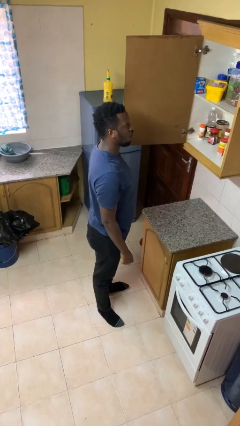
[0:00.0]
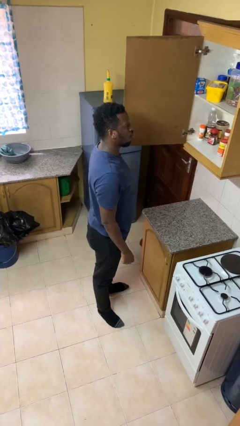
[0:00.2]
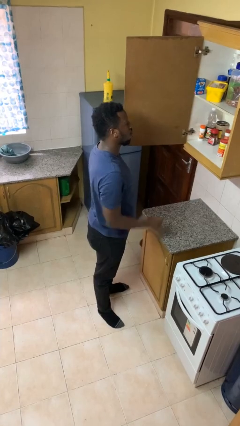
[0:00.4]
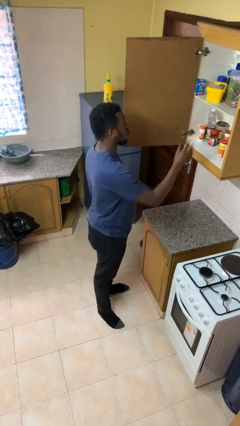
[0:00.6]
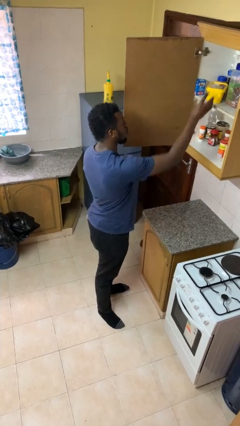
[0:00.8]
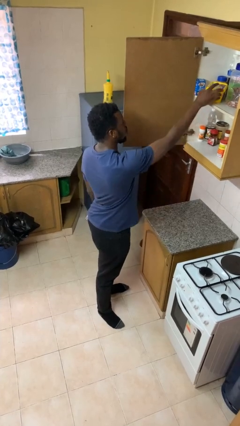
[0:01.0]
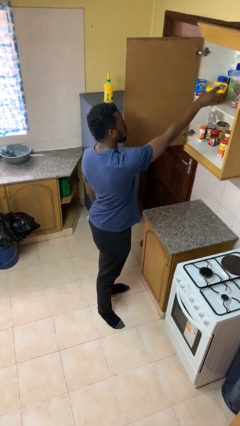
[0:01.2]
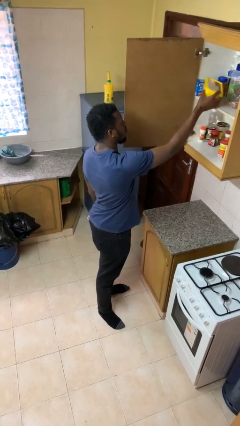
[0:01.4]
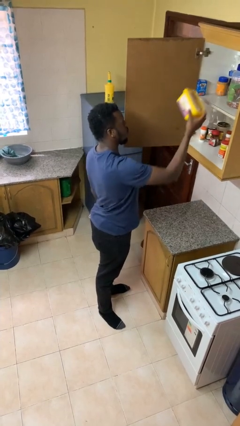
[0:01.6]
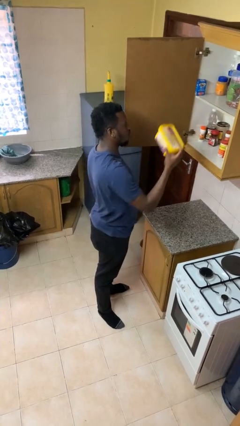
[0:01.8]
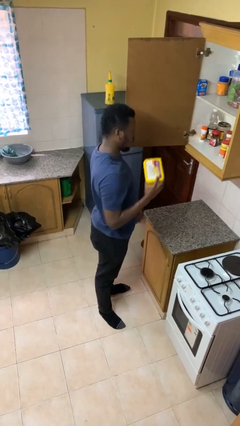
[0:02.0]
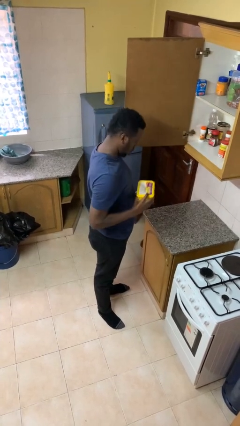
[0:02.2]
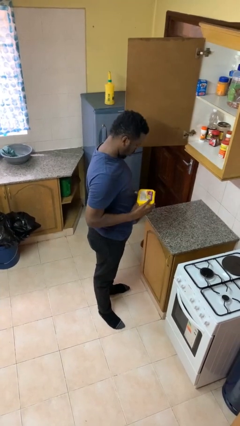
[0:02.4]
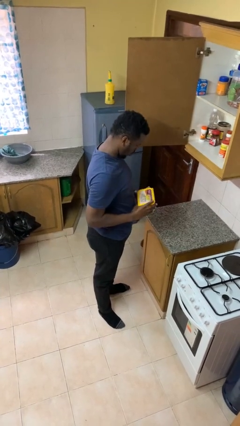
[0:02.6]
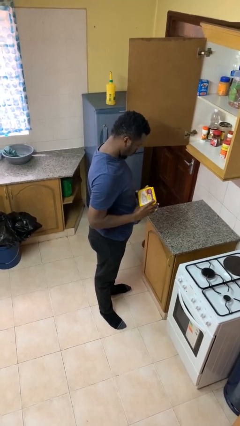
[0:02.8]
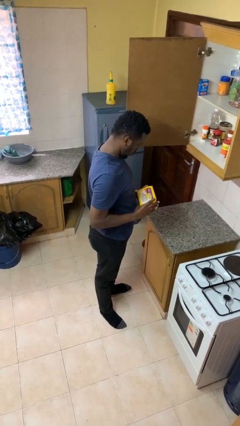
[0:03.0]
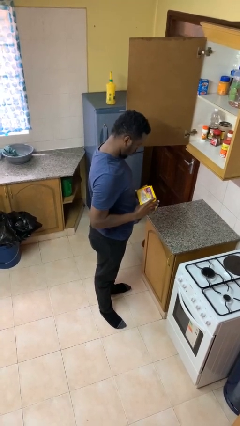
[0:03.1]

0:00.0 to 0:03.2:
person picks up object from shelf

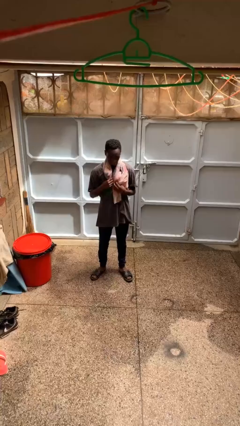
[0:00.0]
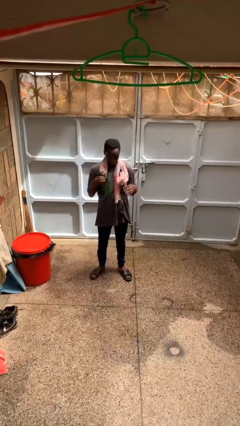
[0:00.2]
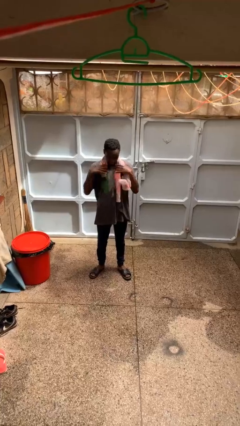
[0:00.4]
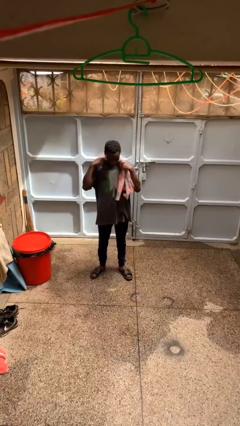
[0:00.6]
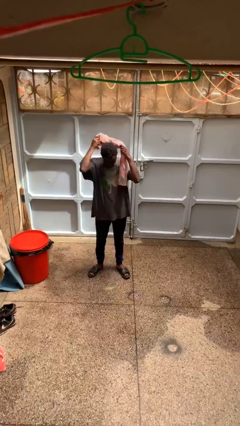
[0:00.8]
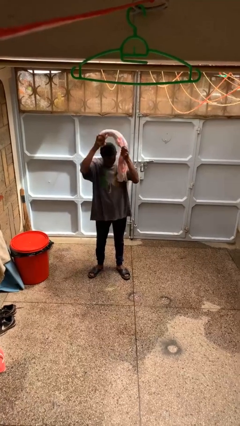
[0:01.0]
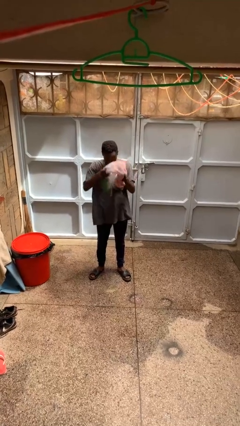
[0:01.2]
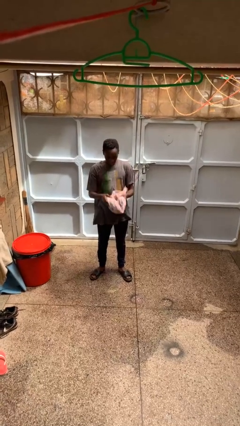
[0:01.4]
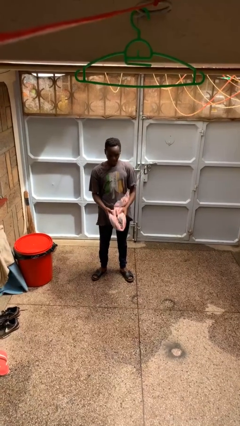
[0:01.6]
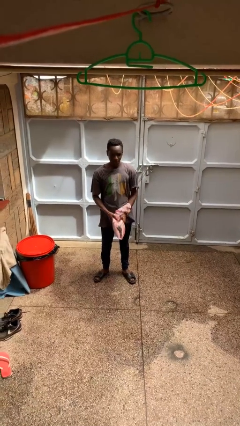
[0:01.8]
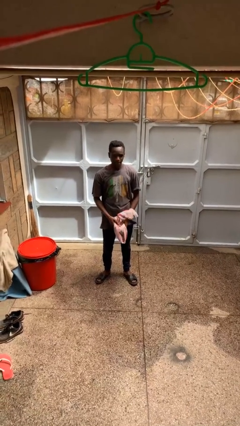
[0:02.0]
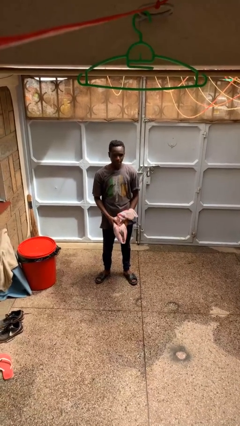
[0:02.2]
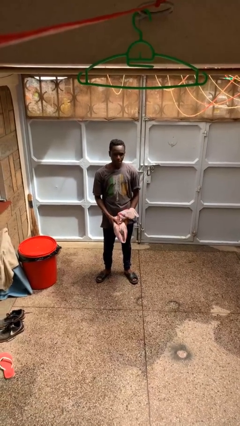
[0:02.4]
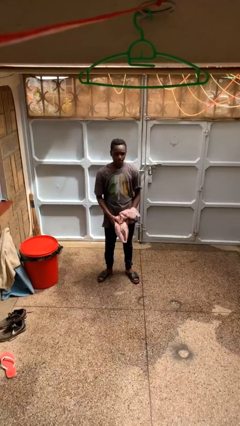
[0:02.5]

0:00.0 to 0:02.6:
person takes off scarf

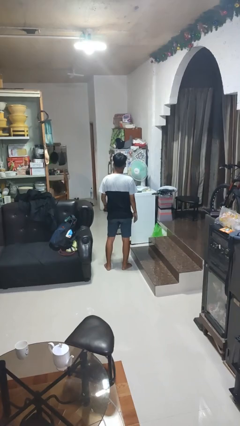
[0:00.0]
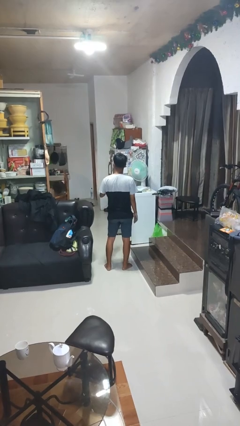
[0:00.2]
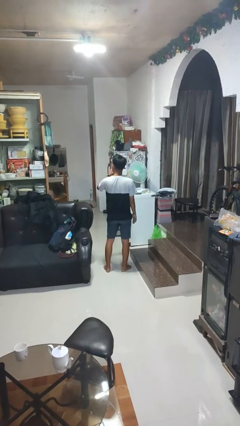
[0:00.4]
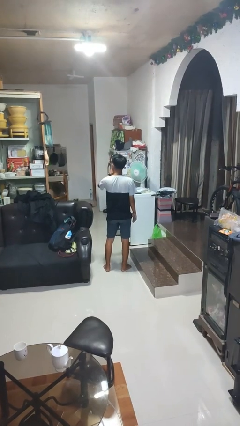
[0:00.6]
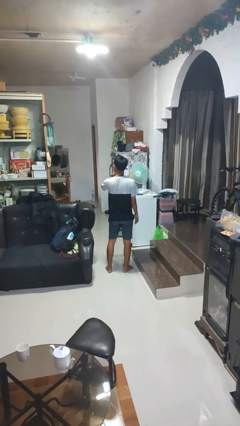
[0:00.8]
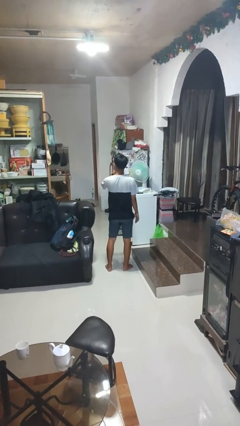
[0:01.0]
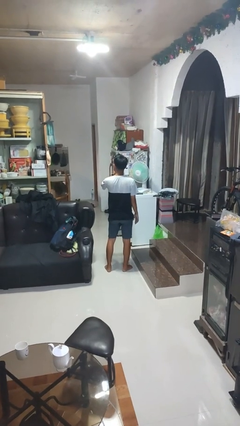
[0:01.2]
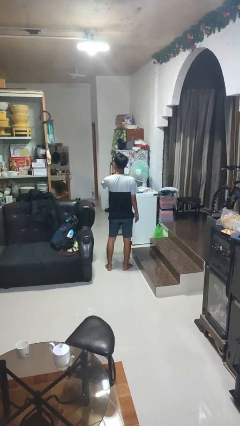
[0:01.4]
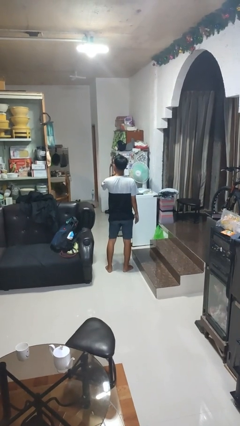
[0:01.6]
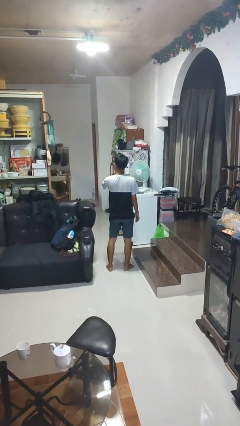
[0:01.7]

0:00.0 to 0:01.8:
person gestures be quiet

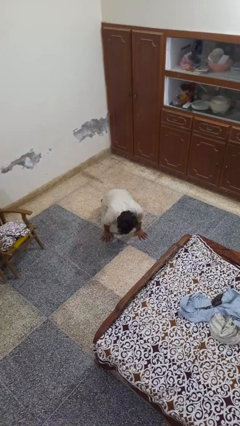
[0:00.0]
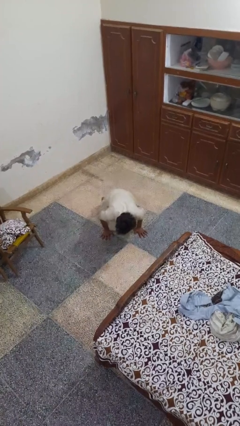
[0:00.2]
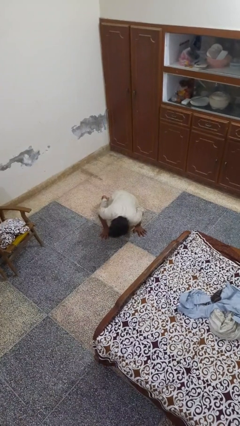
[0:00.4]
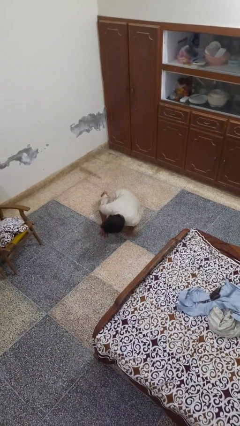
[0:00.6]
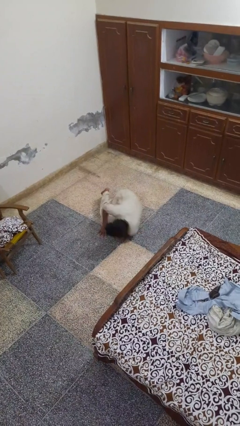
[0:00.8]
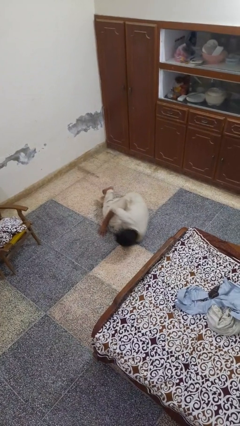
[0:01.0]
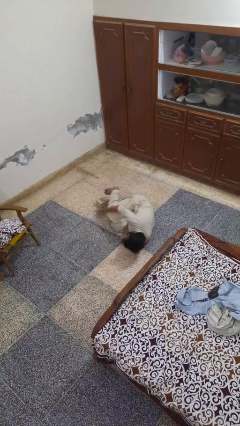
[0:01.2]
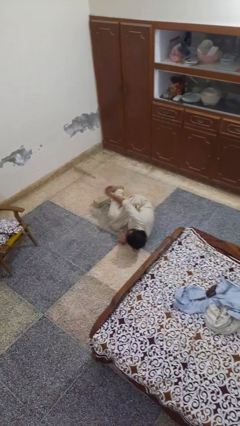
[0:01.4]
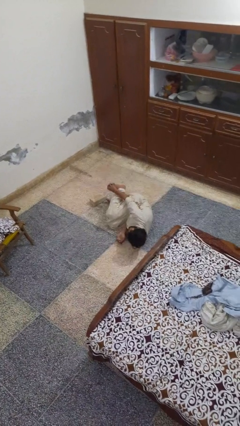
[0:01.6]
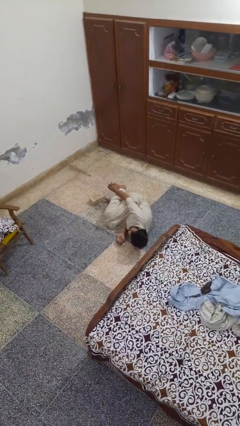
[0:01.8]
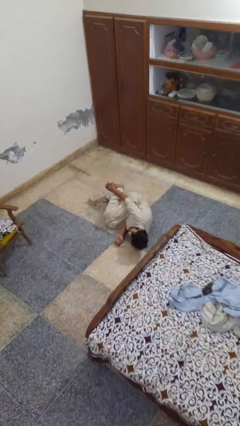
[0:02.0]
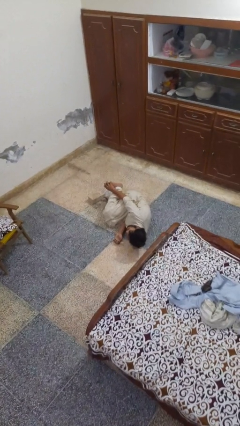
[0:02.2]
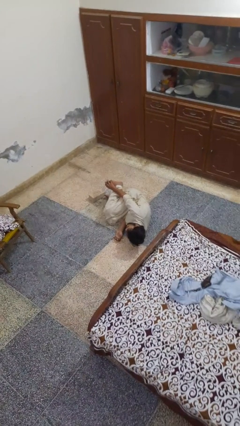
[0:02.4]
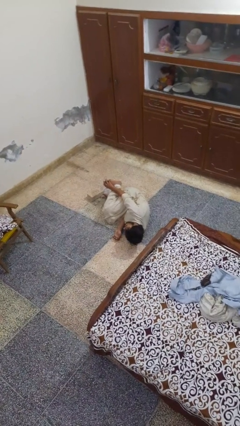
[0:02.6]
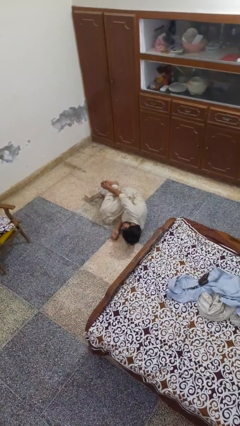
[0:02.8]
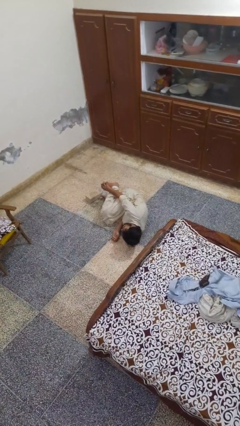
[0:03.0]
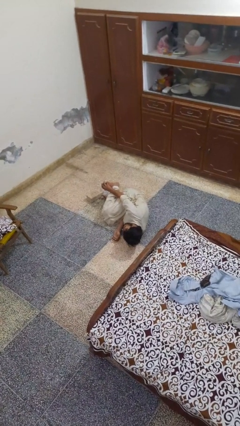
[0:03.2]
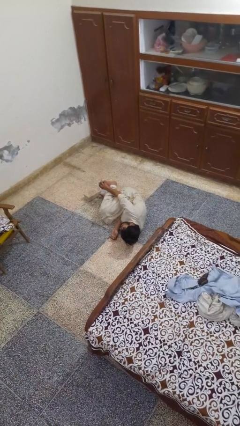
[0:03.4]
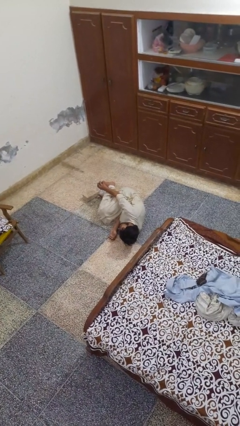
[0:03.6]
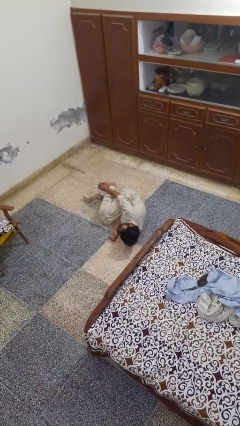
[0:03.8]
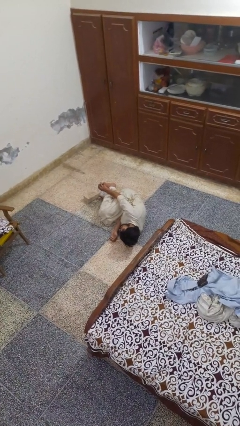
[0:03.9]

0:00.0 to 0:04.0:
person lies down on floor

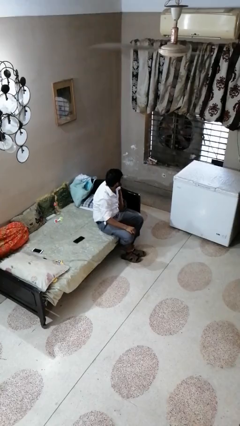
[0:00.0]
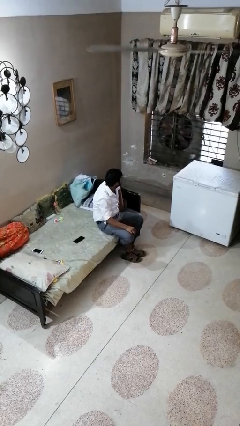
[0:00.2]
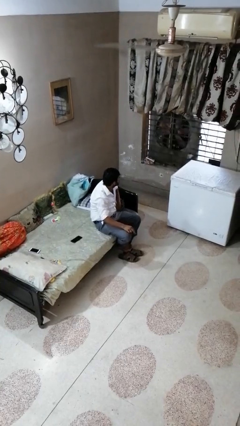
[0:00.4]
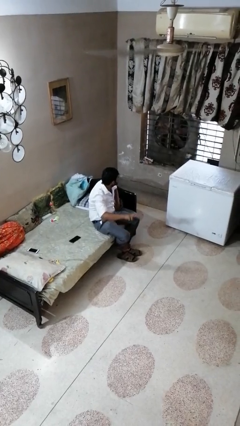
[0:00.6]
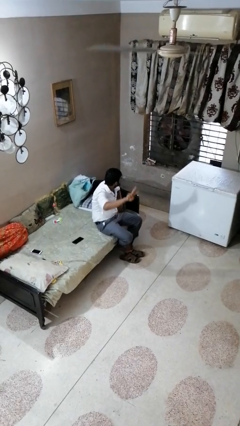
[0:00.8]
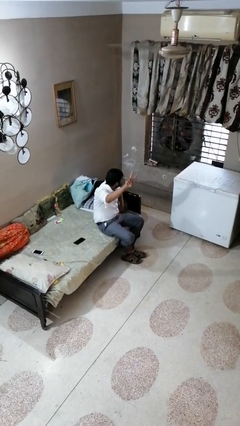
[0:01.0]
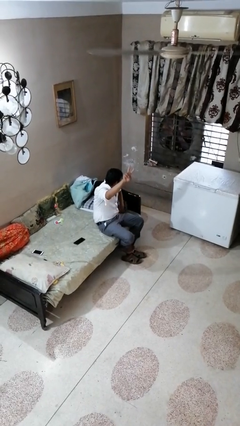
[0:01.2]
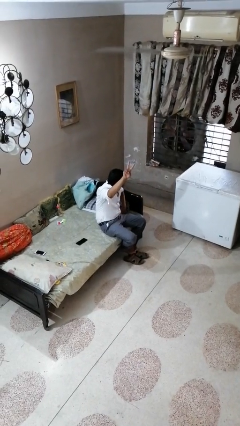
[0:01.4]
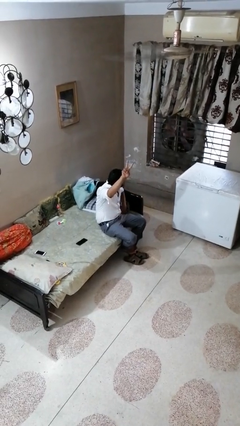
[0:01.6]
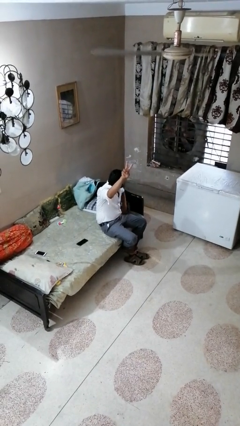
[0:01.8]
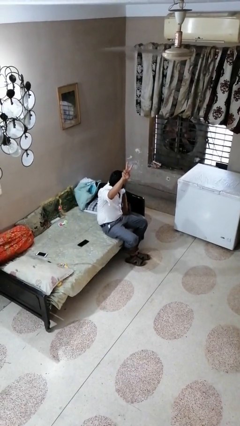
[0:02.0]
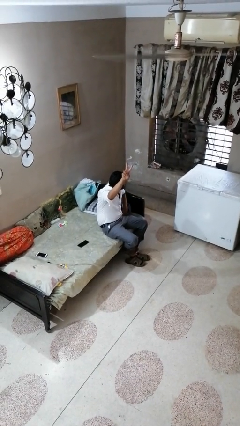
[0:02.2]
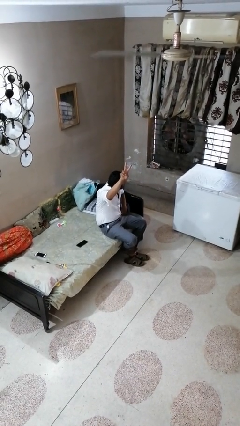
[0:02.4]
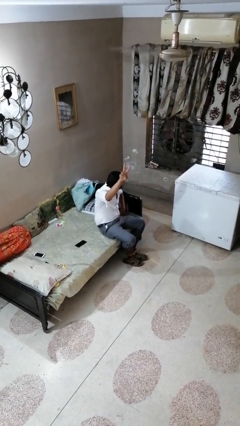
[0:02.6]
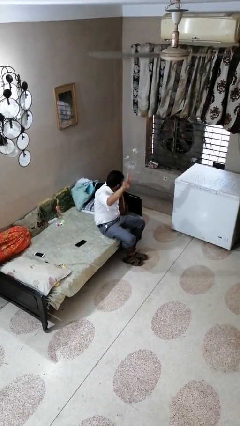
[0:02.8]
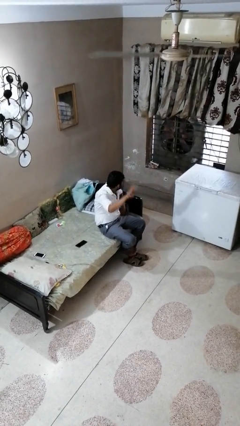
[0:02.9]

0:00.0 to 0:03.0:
person gestures peace

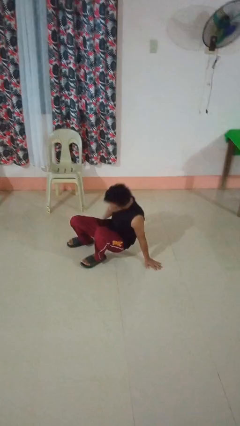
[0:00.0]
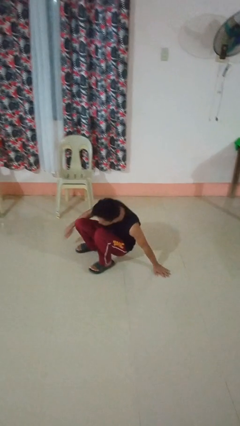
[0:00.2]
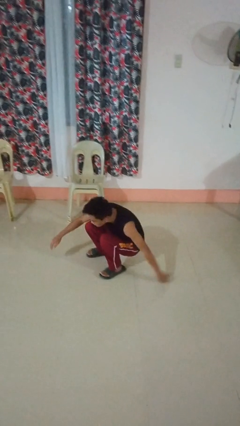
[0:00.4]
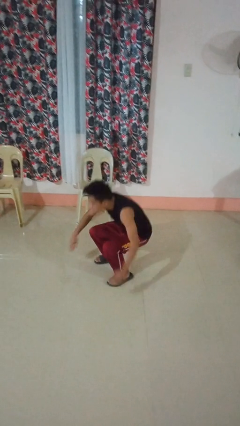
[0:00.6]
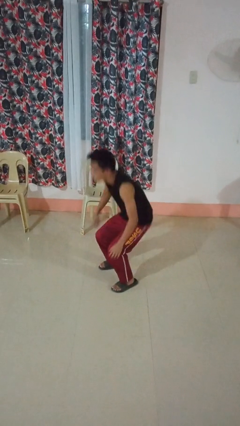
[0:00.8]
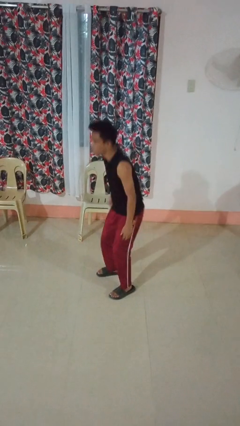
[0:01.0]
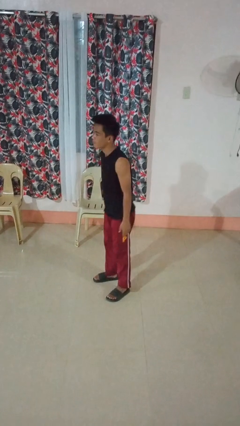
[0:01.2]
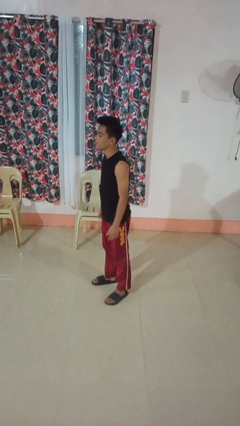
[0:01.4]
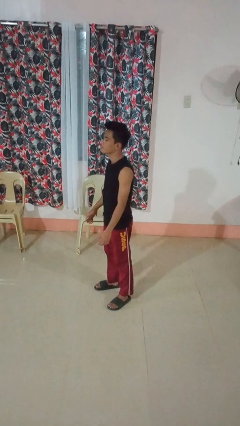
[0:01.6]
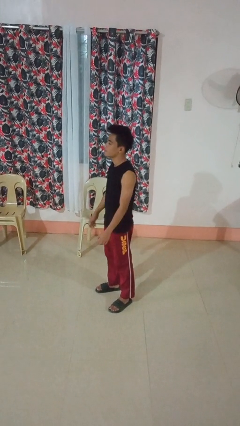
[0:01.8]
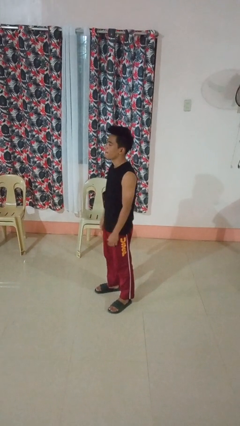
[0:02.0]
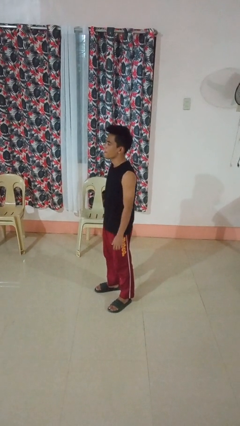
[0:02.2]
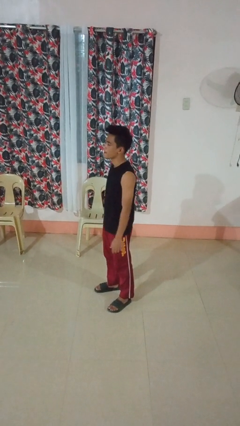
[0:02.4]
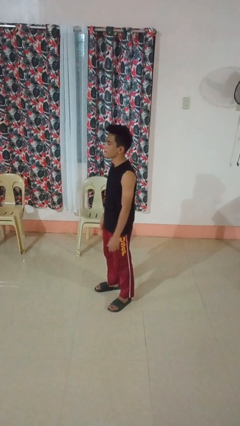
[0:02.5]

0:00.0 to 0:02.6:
person stands up from floor

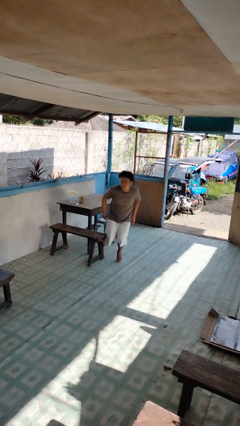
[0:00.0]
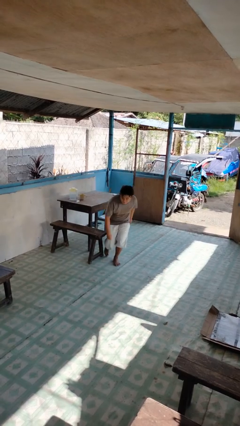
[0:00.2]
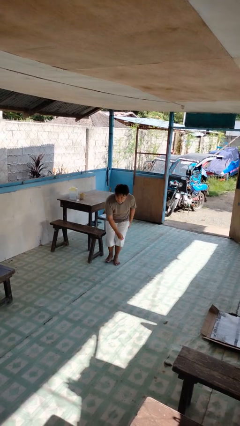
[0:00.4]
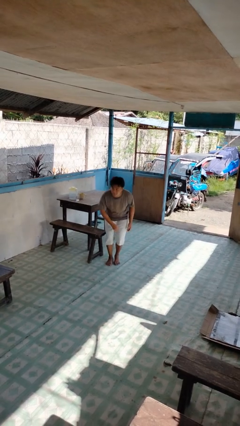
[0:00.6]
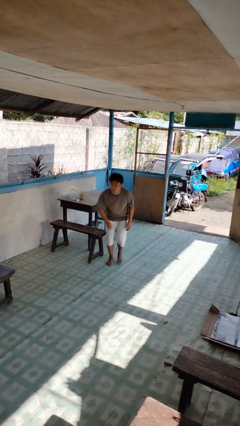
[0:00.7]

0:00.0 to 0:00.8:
person stubs toe
